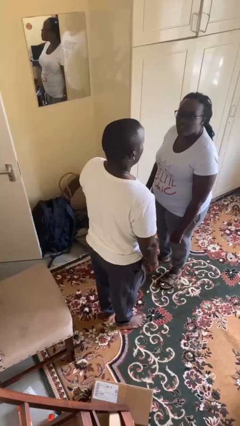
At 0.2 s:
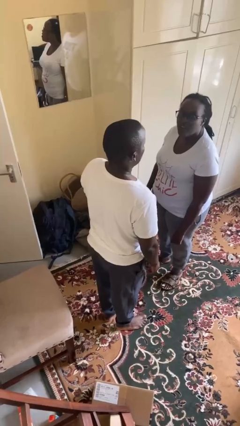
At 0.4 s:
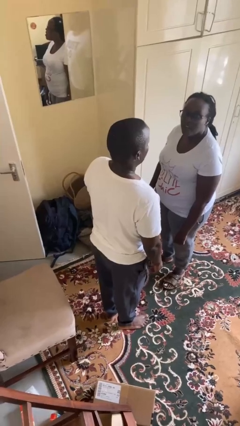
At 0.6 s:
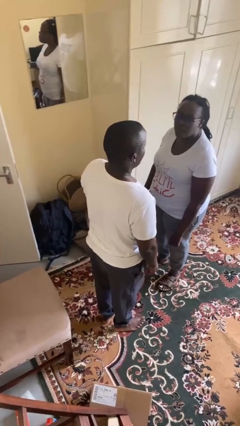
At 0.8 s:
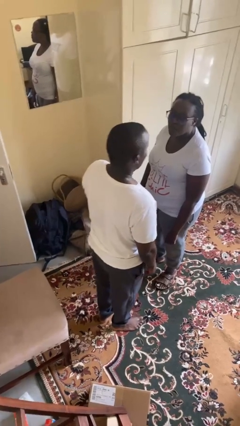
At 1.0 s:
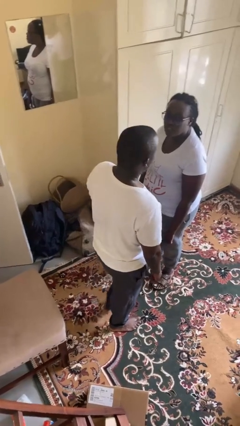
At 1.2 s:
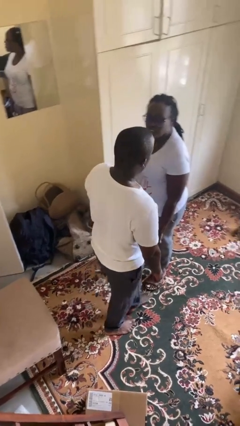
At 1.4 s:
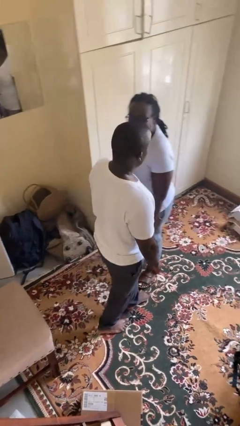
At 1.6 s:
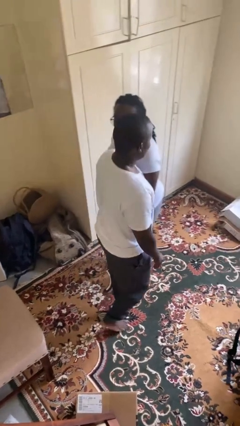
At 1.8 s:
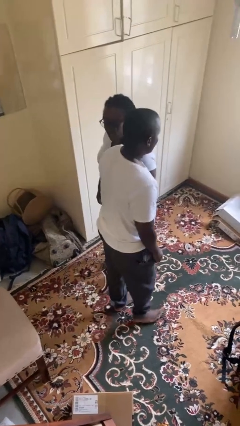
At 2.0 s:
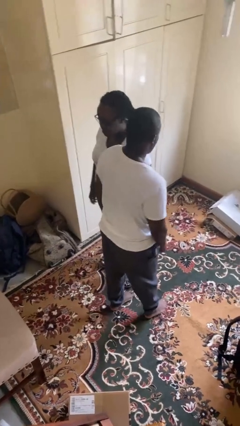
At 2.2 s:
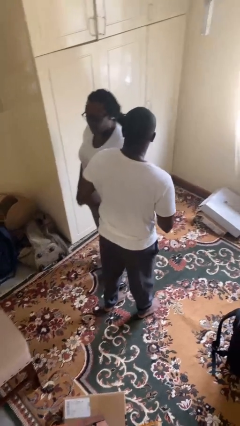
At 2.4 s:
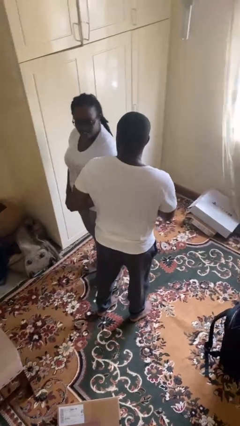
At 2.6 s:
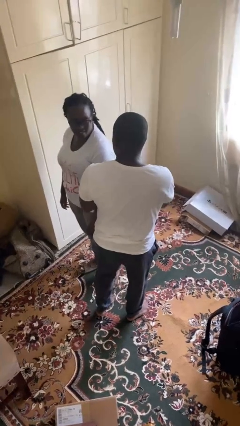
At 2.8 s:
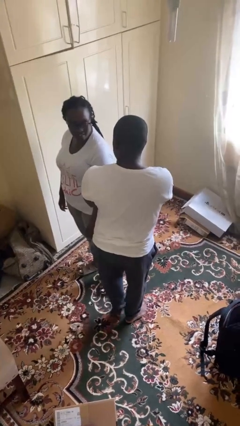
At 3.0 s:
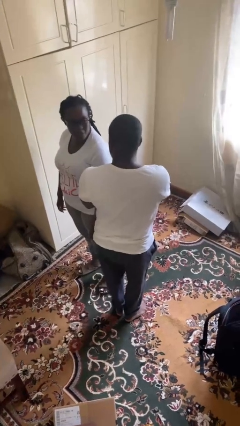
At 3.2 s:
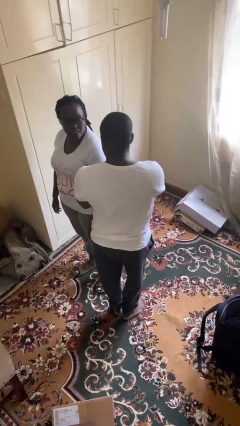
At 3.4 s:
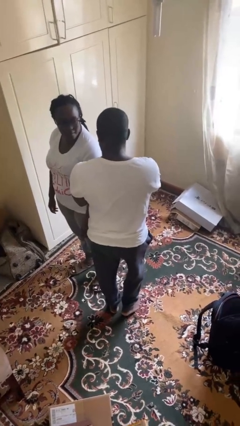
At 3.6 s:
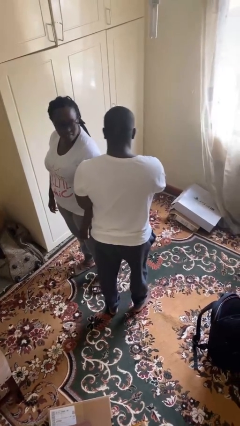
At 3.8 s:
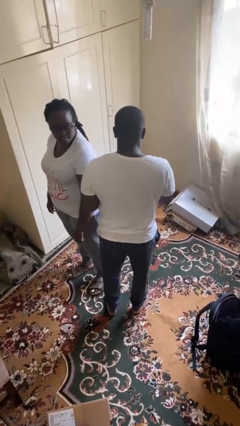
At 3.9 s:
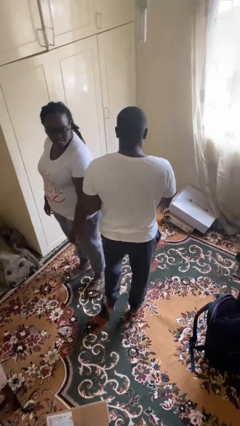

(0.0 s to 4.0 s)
person bumps into person

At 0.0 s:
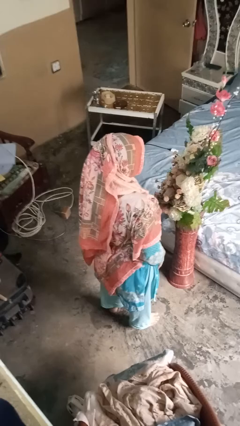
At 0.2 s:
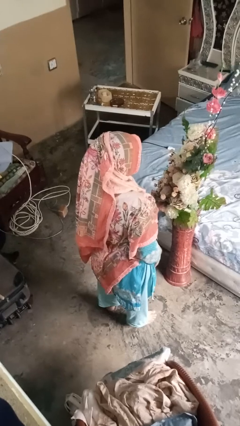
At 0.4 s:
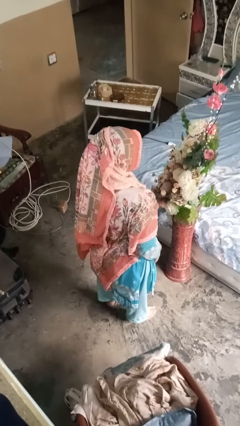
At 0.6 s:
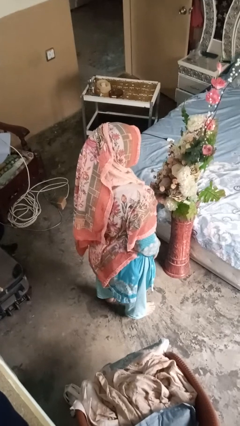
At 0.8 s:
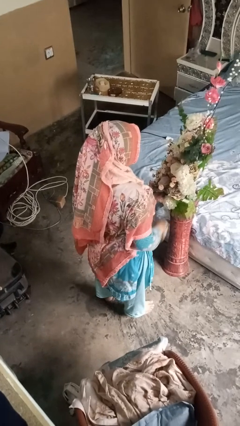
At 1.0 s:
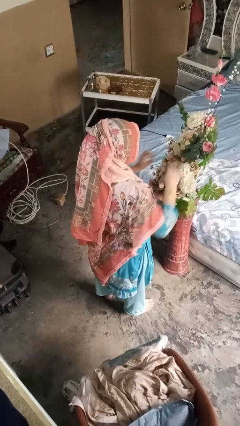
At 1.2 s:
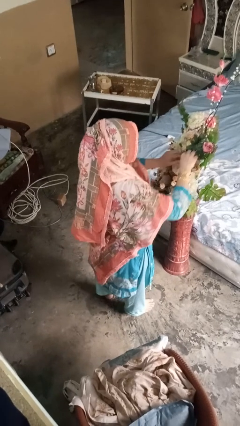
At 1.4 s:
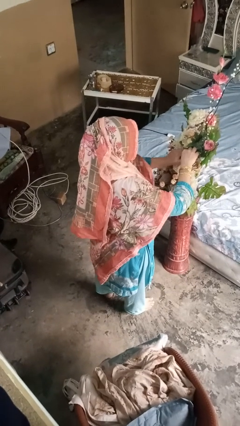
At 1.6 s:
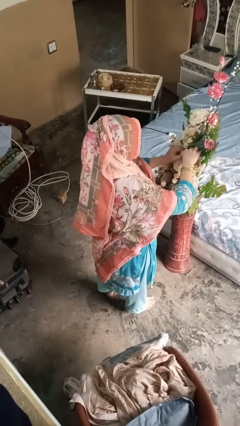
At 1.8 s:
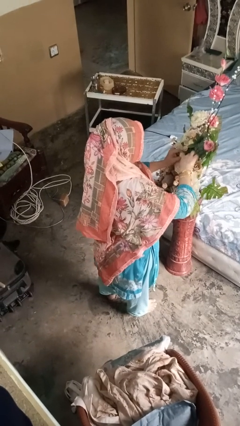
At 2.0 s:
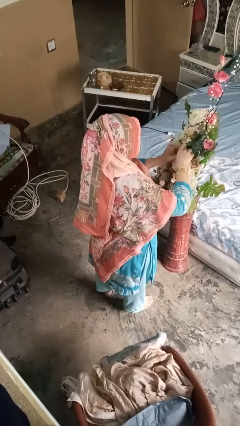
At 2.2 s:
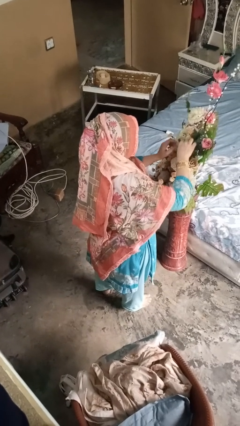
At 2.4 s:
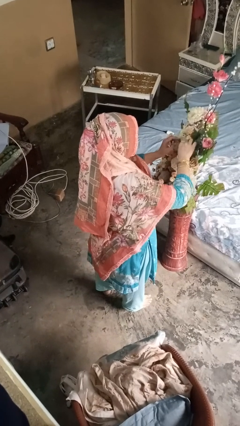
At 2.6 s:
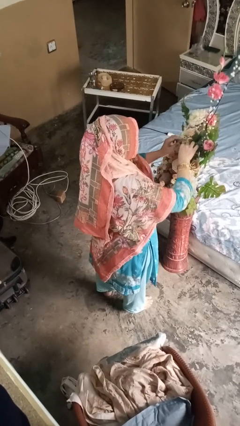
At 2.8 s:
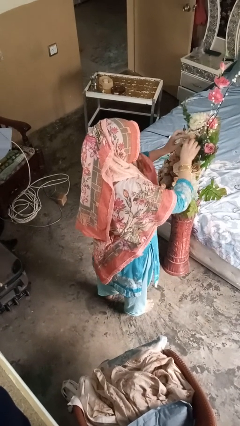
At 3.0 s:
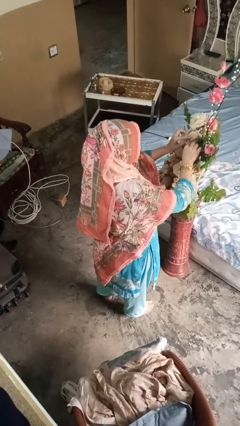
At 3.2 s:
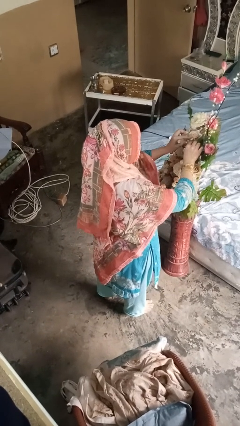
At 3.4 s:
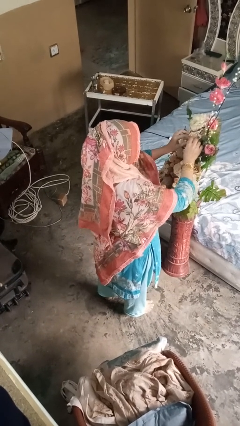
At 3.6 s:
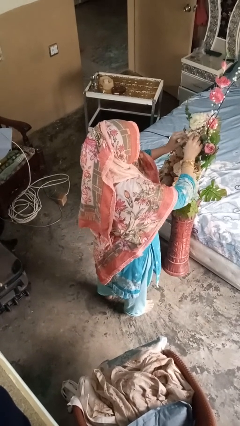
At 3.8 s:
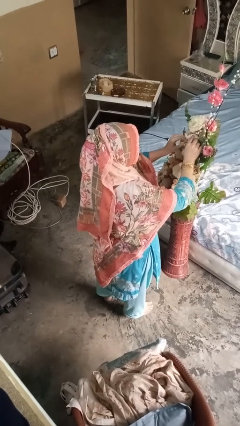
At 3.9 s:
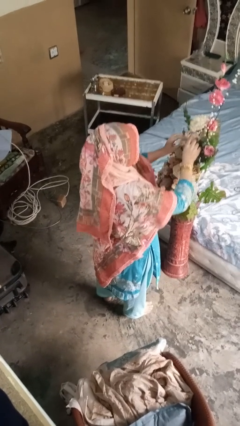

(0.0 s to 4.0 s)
person arranges flowers in vase

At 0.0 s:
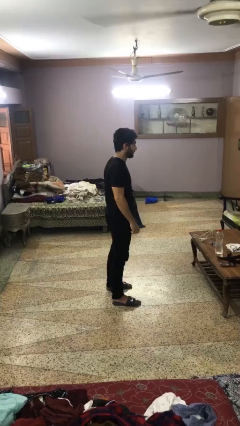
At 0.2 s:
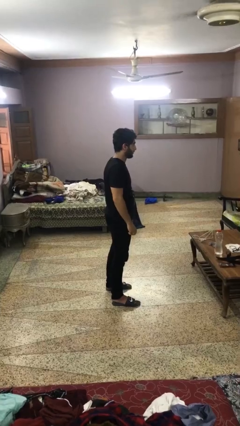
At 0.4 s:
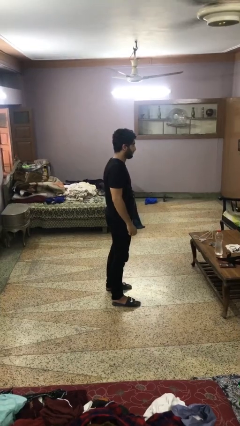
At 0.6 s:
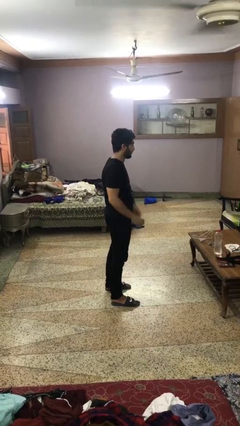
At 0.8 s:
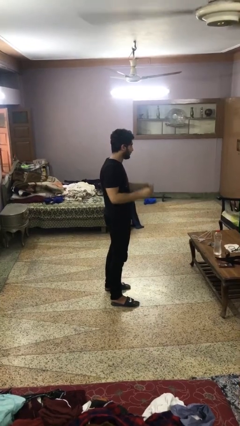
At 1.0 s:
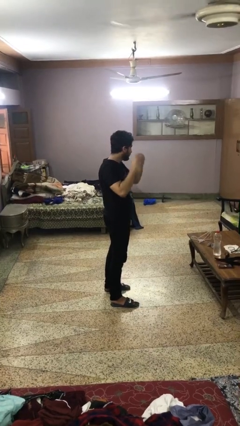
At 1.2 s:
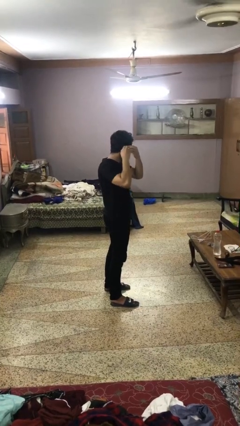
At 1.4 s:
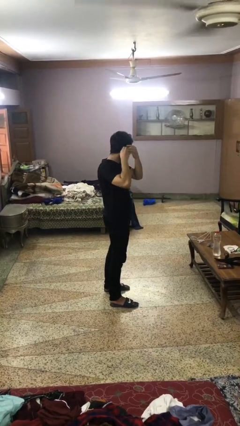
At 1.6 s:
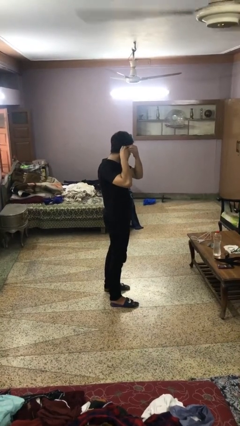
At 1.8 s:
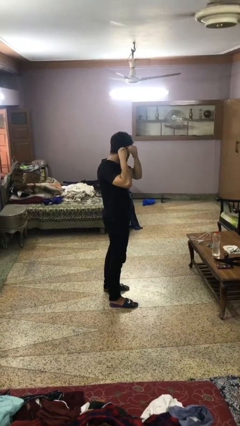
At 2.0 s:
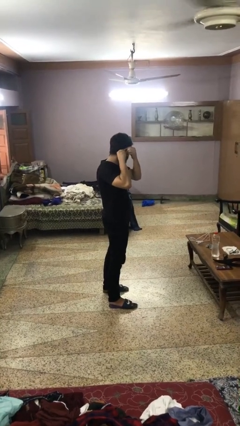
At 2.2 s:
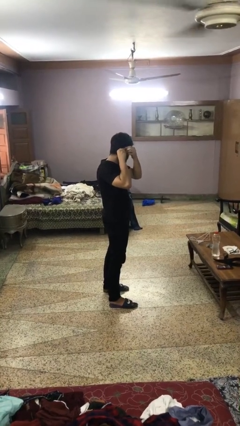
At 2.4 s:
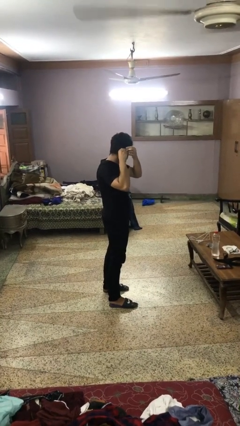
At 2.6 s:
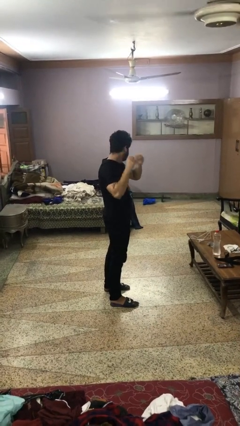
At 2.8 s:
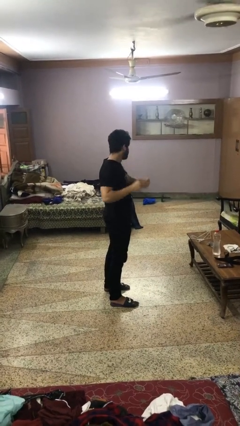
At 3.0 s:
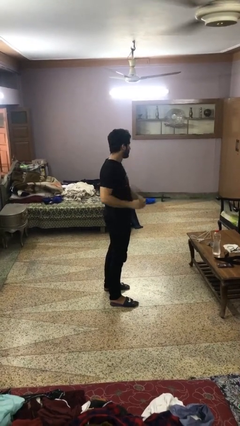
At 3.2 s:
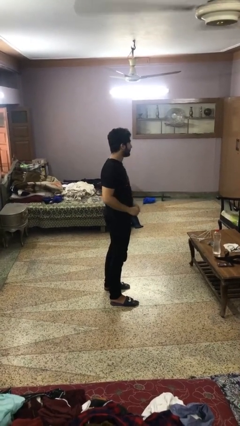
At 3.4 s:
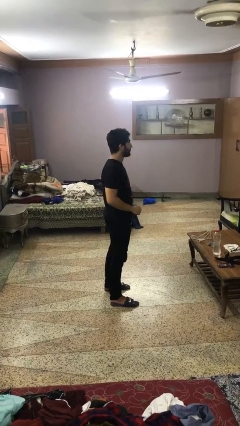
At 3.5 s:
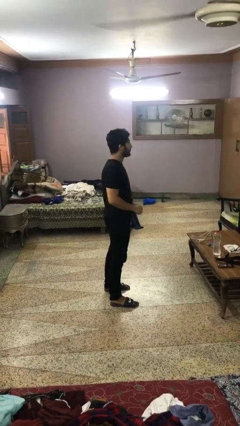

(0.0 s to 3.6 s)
person takes off earrings

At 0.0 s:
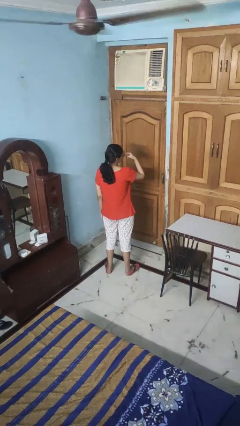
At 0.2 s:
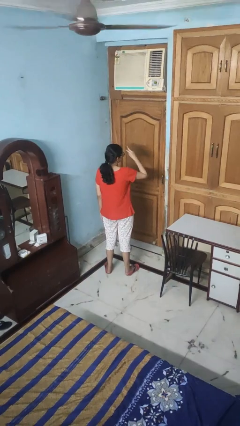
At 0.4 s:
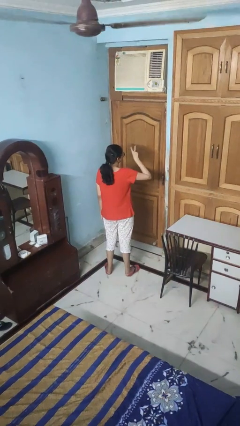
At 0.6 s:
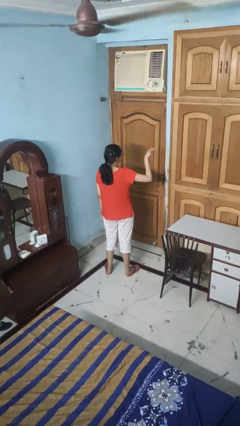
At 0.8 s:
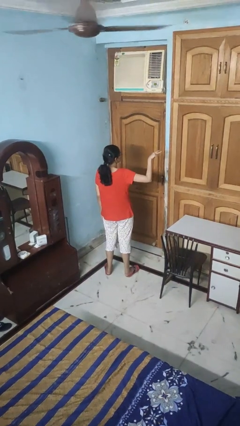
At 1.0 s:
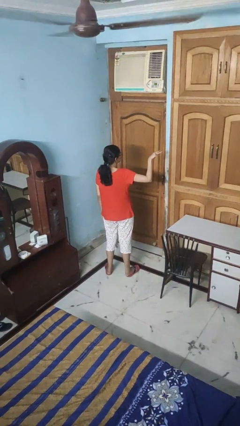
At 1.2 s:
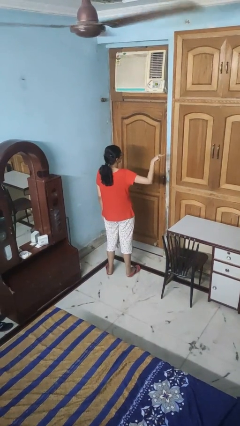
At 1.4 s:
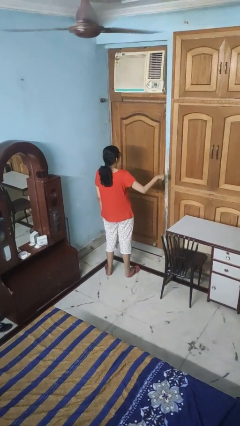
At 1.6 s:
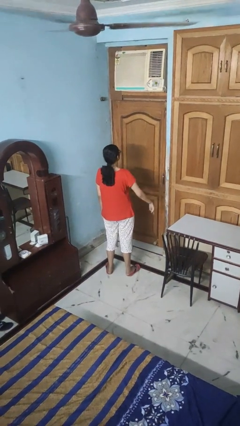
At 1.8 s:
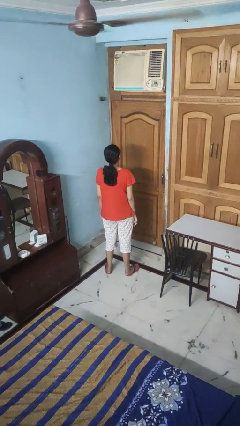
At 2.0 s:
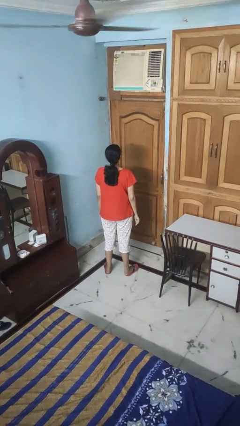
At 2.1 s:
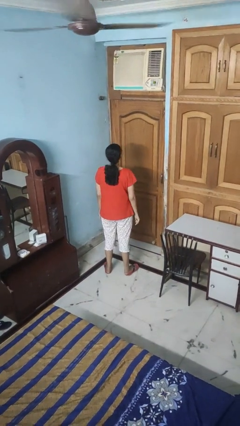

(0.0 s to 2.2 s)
person gestures watch closely

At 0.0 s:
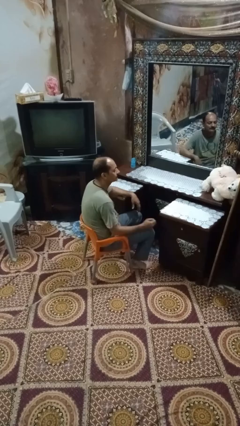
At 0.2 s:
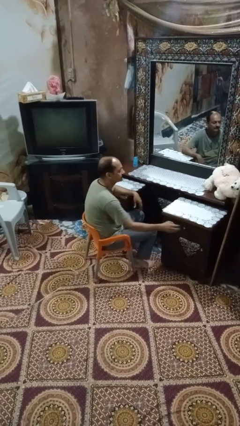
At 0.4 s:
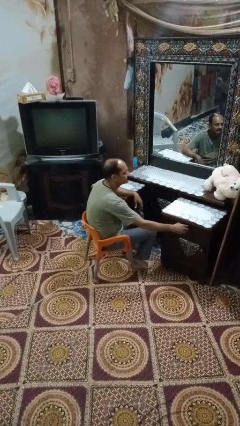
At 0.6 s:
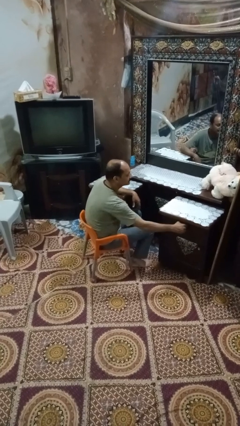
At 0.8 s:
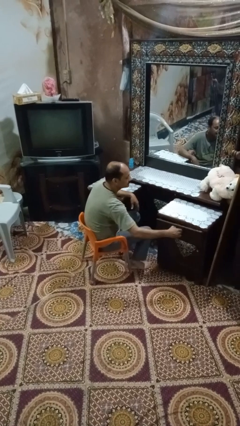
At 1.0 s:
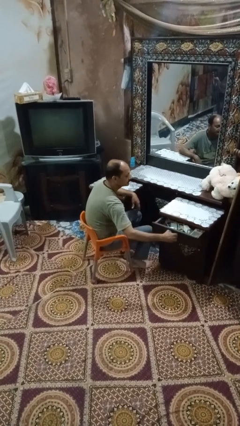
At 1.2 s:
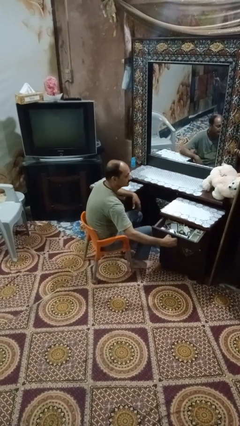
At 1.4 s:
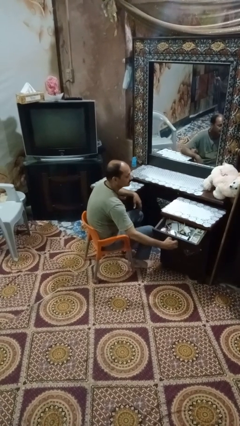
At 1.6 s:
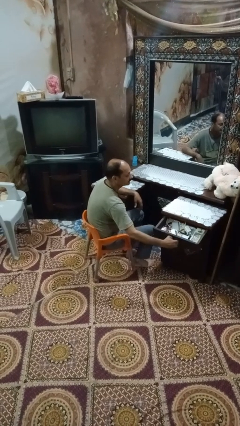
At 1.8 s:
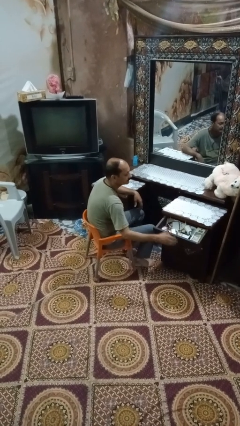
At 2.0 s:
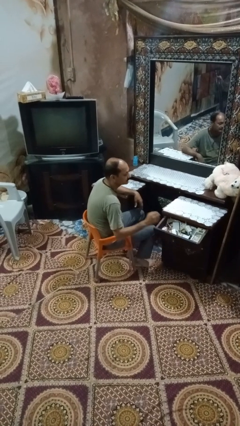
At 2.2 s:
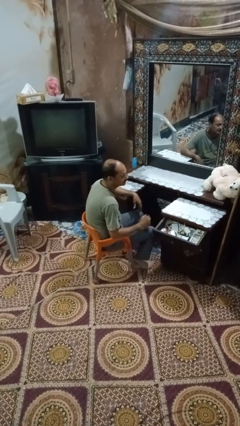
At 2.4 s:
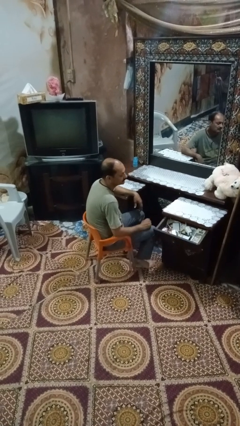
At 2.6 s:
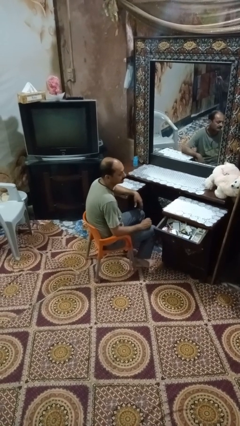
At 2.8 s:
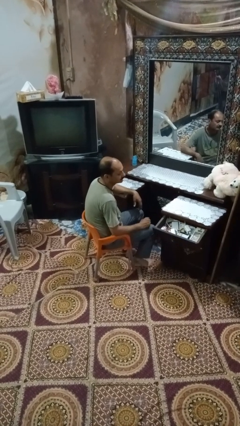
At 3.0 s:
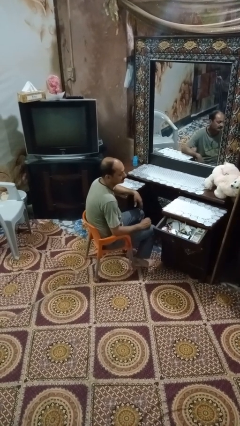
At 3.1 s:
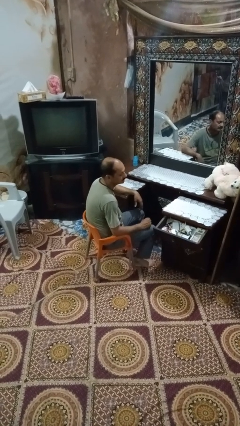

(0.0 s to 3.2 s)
person opens dresser drawer
